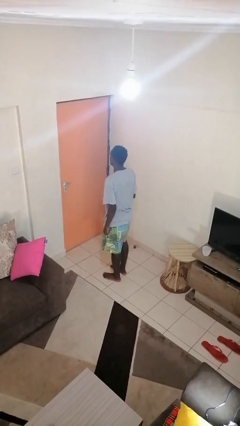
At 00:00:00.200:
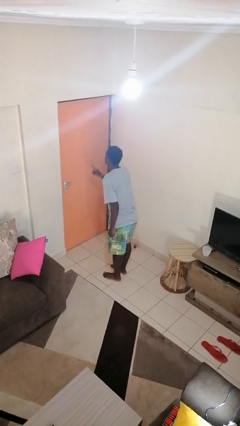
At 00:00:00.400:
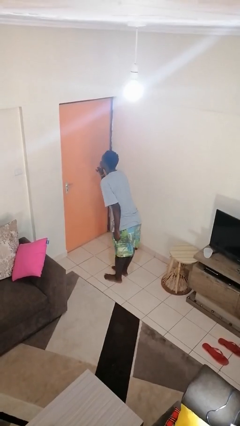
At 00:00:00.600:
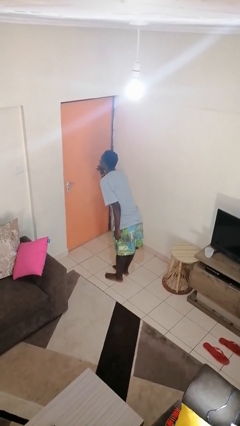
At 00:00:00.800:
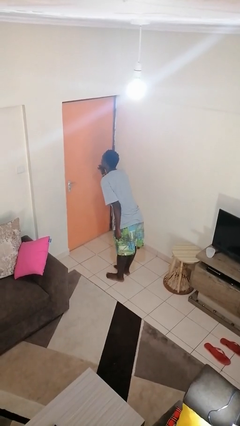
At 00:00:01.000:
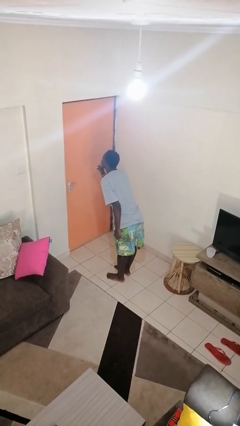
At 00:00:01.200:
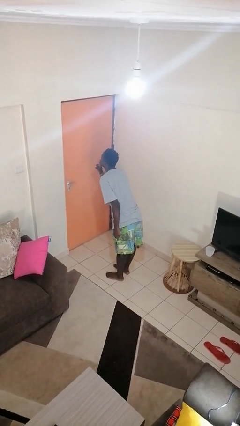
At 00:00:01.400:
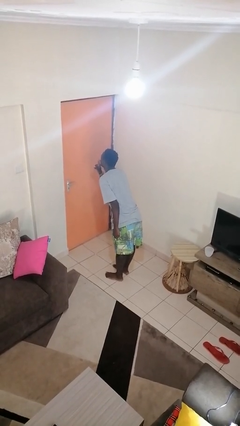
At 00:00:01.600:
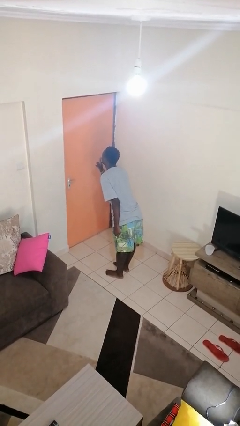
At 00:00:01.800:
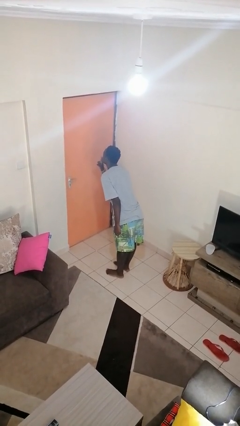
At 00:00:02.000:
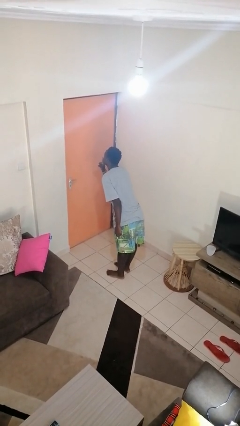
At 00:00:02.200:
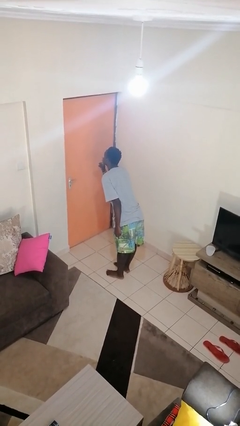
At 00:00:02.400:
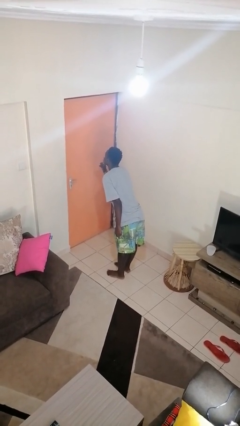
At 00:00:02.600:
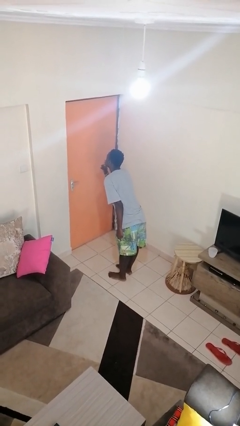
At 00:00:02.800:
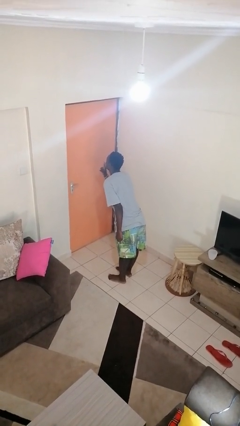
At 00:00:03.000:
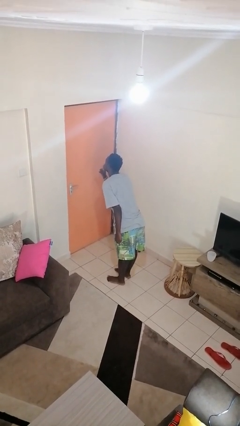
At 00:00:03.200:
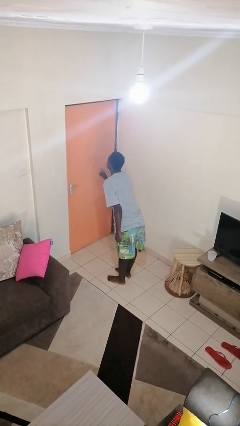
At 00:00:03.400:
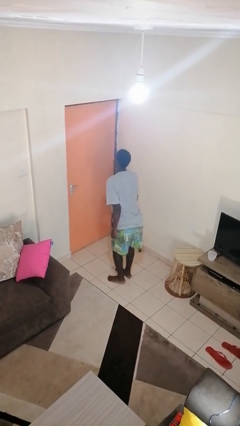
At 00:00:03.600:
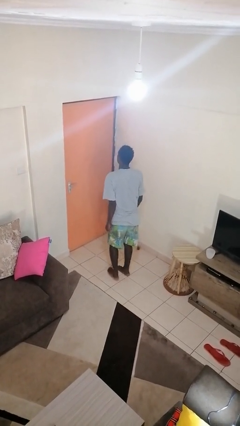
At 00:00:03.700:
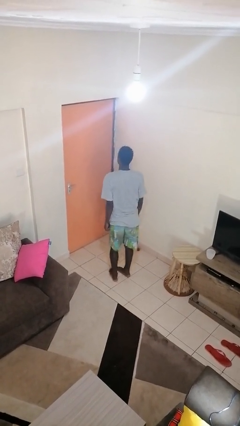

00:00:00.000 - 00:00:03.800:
person gestures be quiet

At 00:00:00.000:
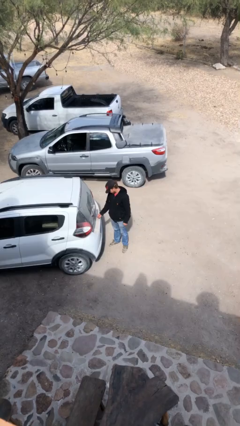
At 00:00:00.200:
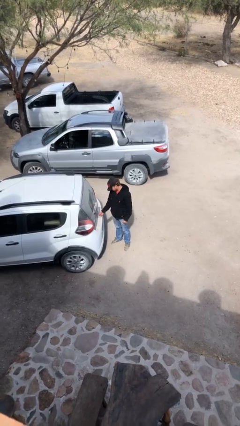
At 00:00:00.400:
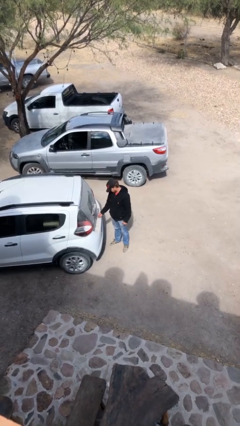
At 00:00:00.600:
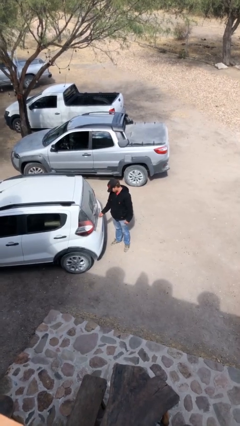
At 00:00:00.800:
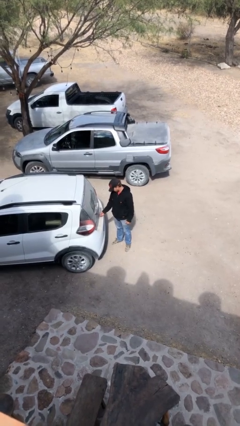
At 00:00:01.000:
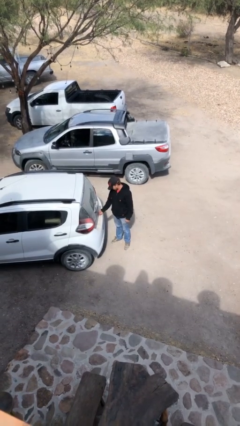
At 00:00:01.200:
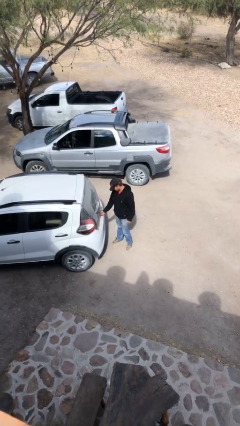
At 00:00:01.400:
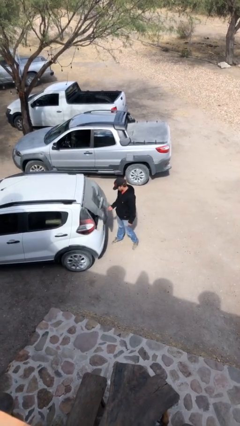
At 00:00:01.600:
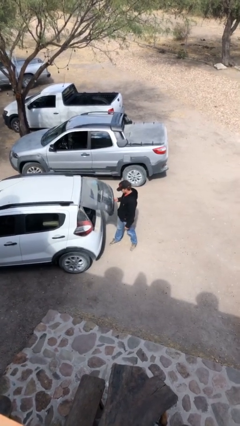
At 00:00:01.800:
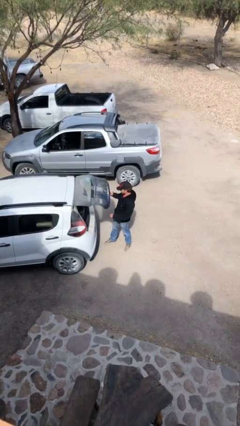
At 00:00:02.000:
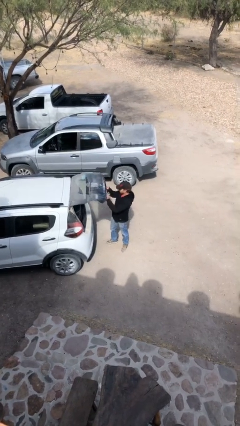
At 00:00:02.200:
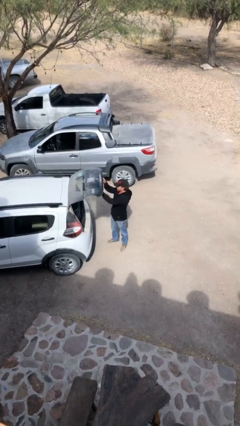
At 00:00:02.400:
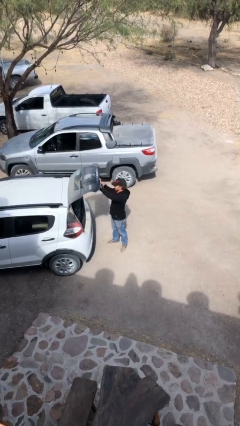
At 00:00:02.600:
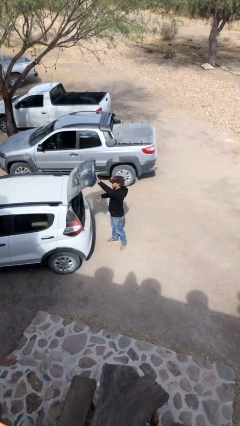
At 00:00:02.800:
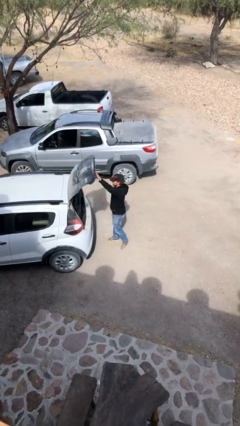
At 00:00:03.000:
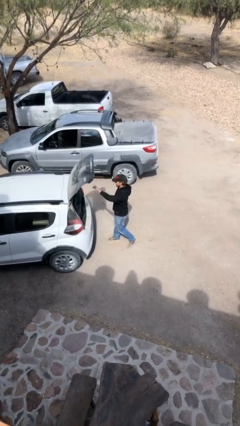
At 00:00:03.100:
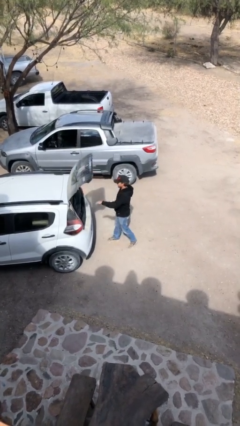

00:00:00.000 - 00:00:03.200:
person opens car trunk

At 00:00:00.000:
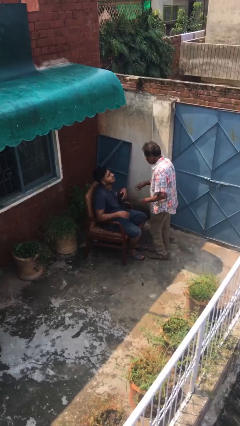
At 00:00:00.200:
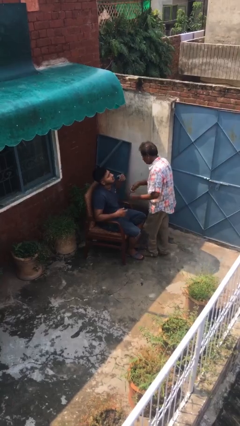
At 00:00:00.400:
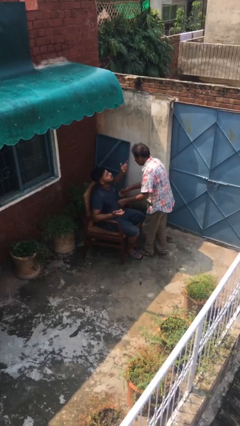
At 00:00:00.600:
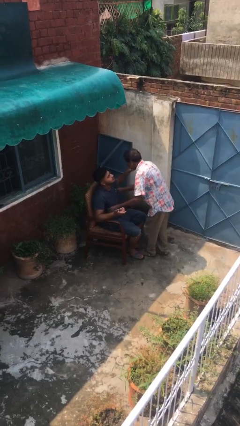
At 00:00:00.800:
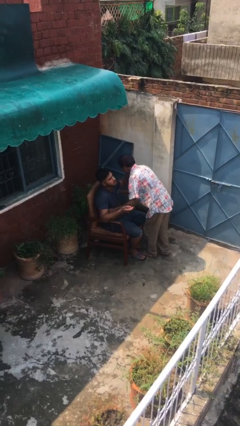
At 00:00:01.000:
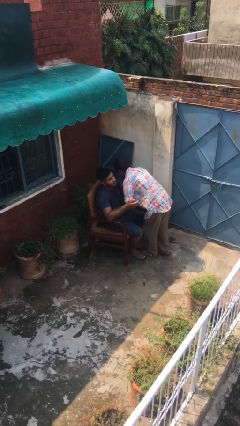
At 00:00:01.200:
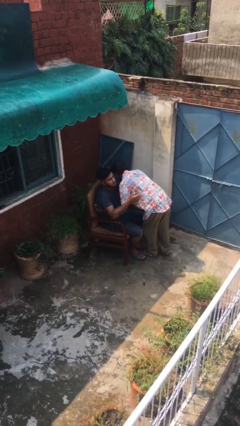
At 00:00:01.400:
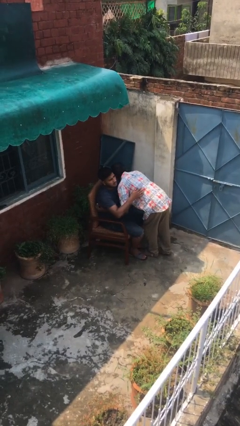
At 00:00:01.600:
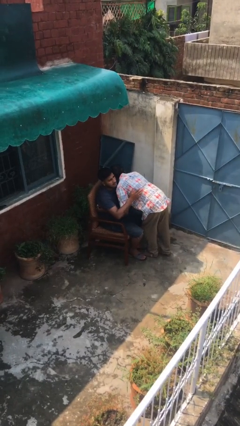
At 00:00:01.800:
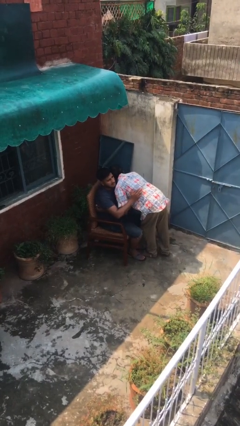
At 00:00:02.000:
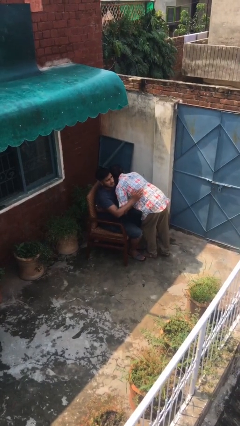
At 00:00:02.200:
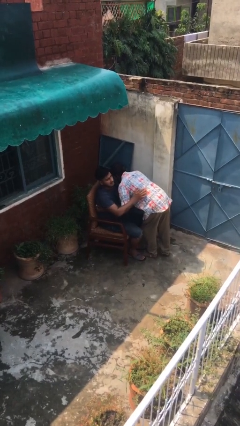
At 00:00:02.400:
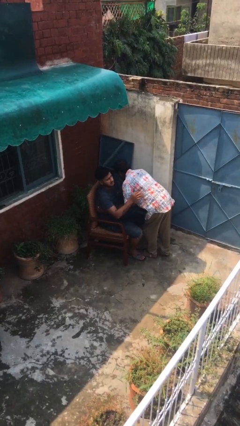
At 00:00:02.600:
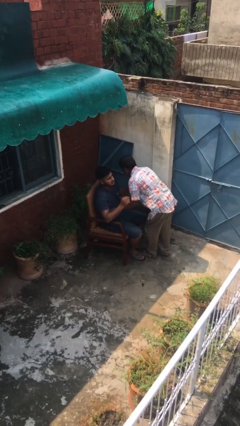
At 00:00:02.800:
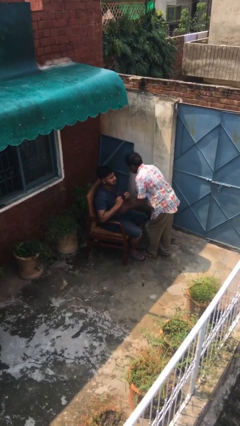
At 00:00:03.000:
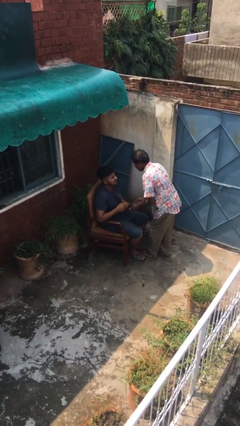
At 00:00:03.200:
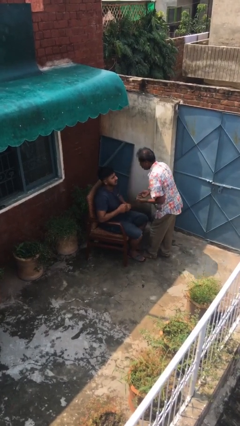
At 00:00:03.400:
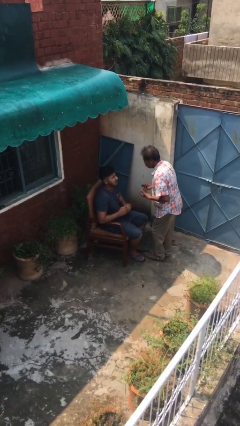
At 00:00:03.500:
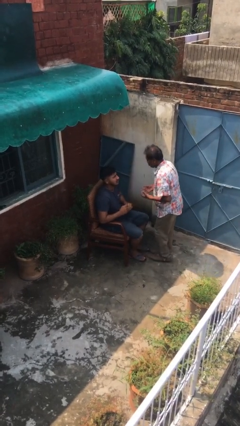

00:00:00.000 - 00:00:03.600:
person embraces person

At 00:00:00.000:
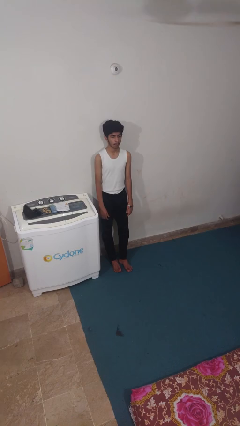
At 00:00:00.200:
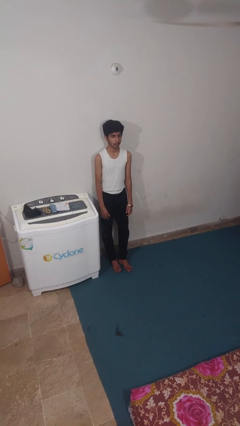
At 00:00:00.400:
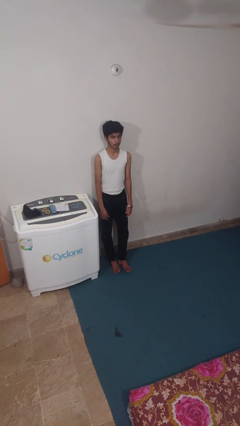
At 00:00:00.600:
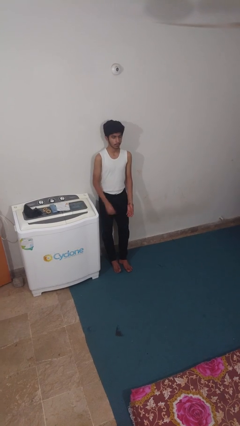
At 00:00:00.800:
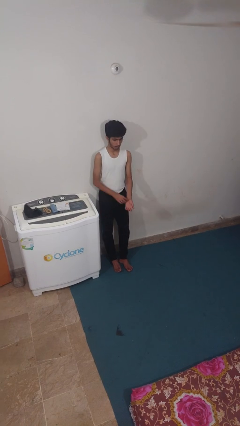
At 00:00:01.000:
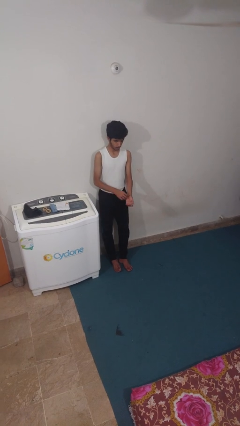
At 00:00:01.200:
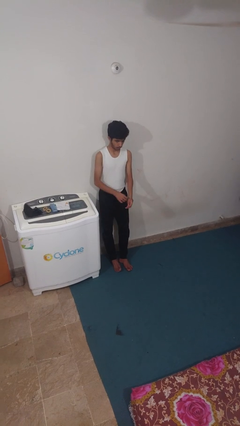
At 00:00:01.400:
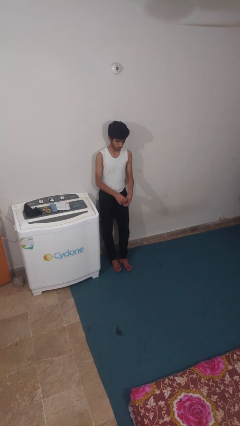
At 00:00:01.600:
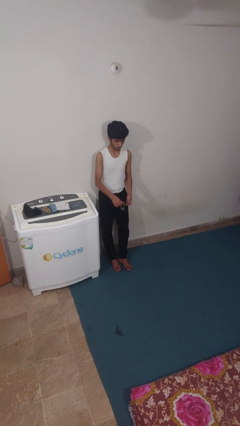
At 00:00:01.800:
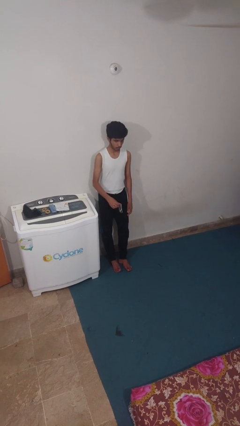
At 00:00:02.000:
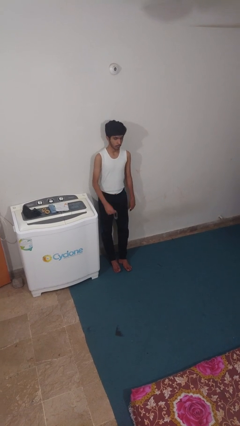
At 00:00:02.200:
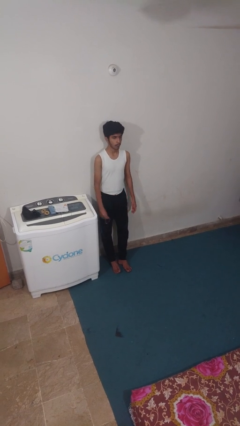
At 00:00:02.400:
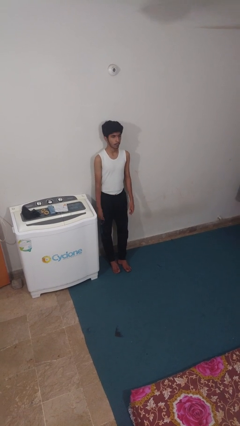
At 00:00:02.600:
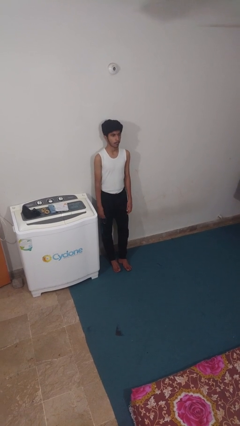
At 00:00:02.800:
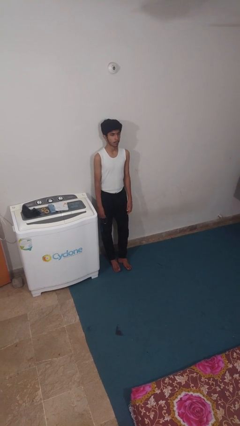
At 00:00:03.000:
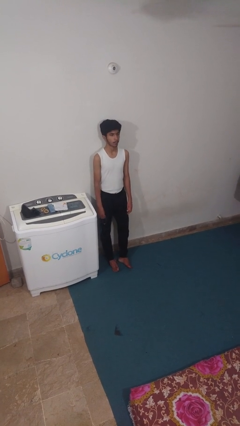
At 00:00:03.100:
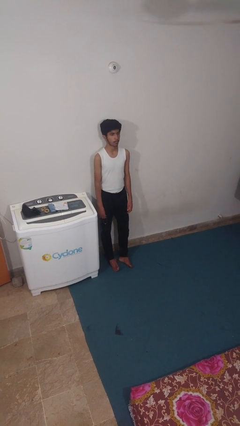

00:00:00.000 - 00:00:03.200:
person takes off wristwatch

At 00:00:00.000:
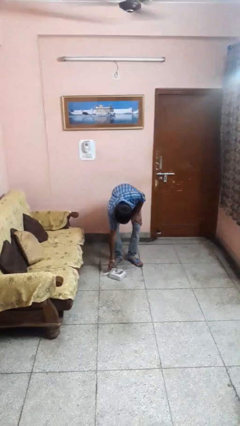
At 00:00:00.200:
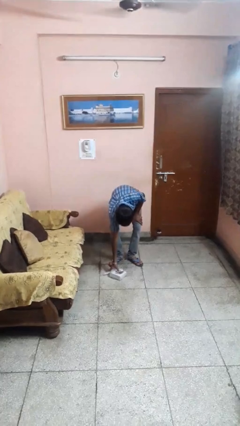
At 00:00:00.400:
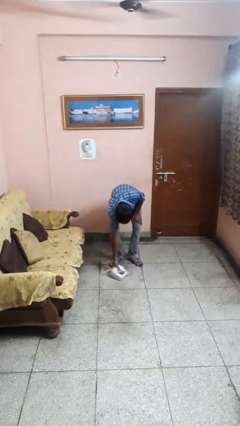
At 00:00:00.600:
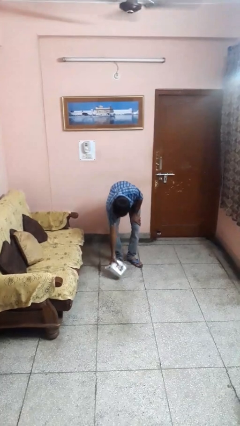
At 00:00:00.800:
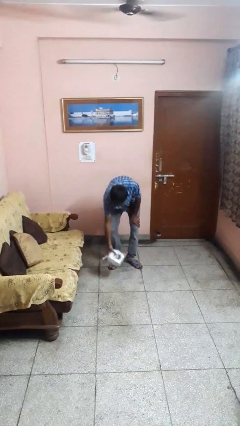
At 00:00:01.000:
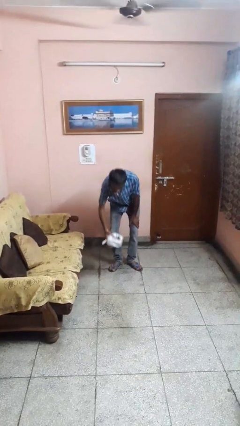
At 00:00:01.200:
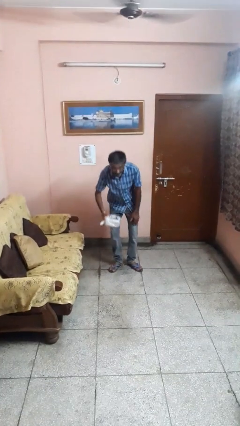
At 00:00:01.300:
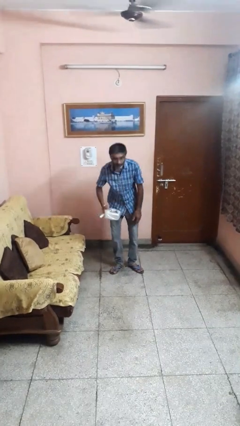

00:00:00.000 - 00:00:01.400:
person picks up object from floor

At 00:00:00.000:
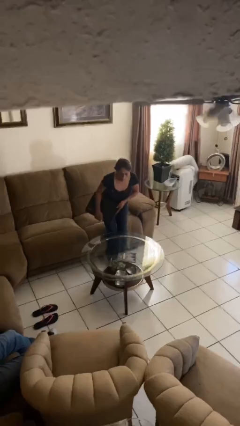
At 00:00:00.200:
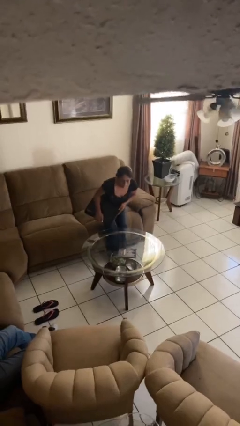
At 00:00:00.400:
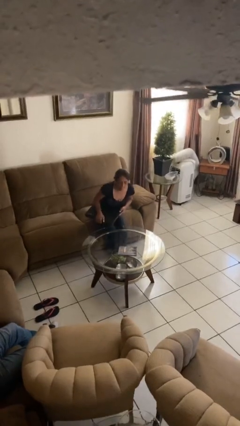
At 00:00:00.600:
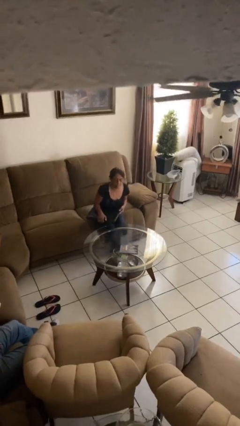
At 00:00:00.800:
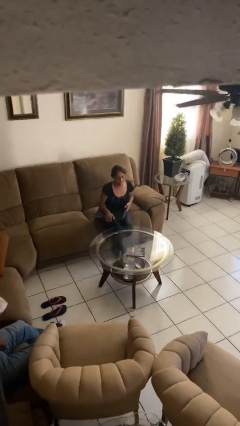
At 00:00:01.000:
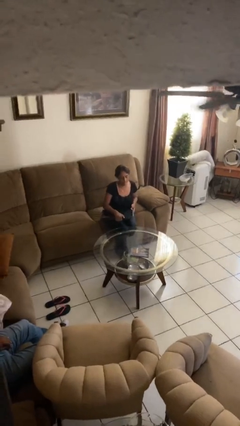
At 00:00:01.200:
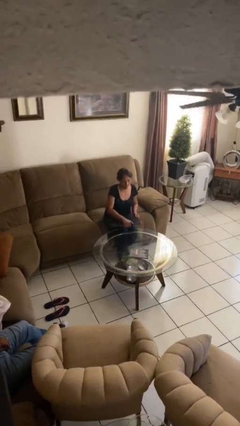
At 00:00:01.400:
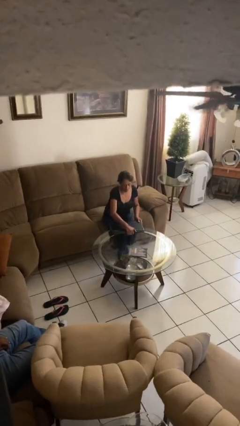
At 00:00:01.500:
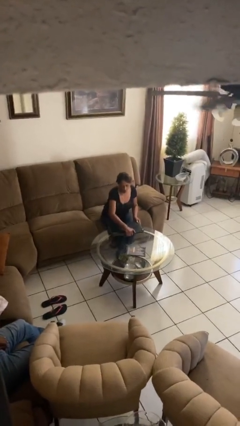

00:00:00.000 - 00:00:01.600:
person sits down
